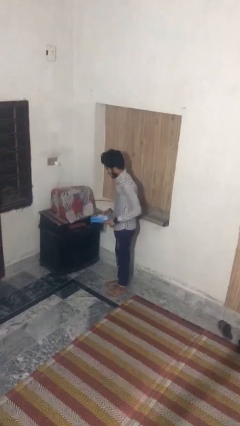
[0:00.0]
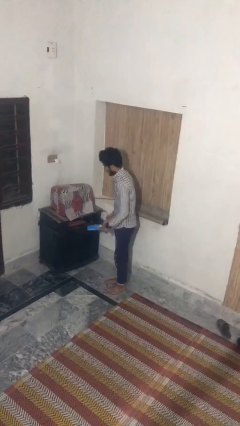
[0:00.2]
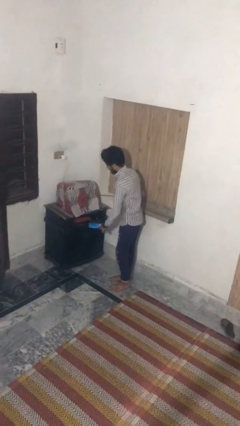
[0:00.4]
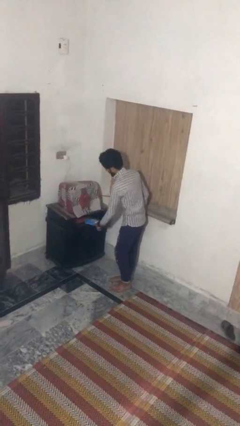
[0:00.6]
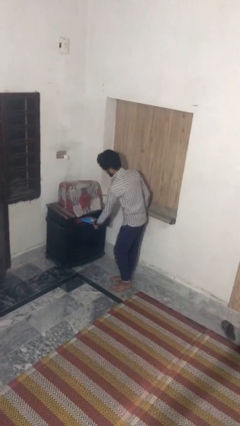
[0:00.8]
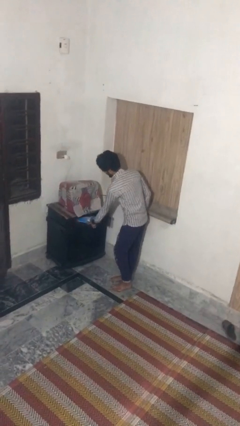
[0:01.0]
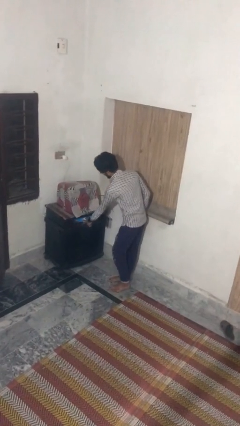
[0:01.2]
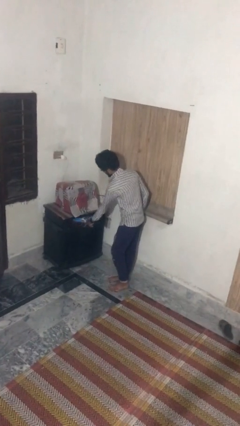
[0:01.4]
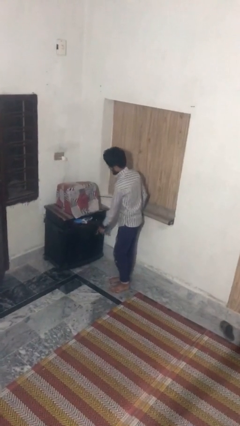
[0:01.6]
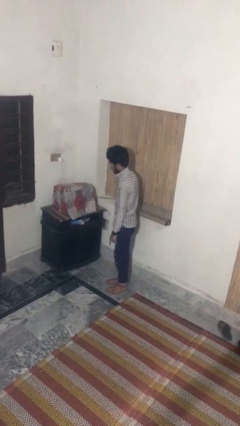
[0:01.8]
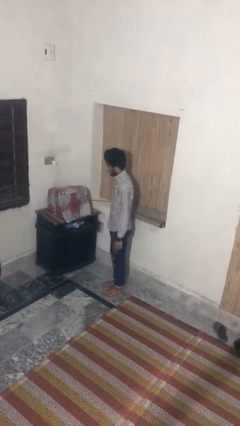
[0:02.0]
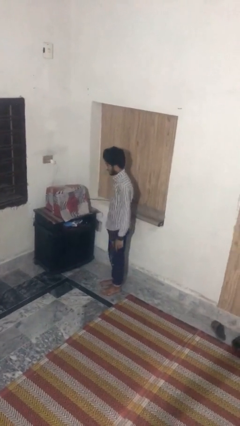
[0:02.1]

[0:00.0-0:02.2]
person puts down object into cabinet

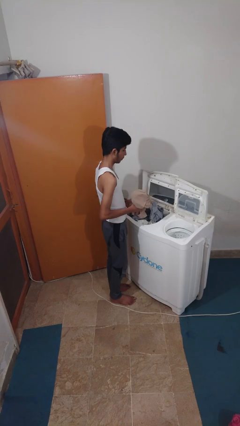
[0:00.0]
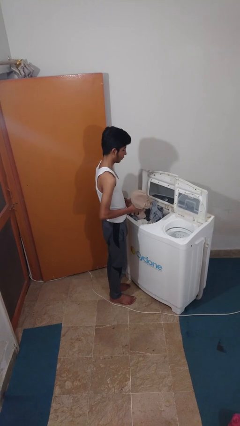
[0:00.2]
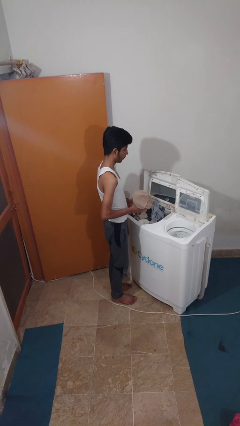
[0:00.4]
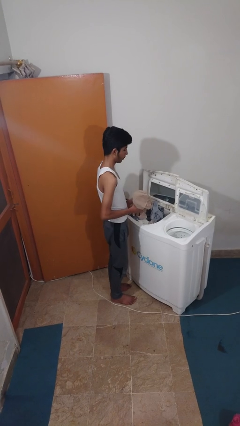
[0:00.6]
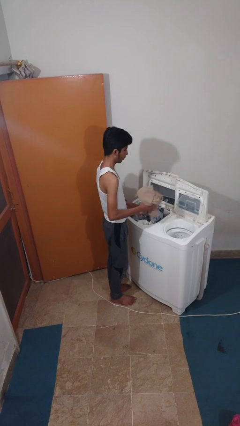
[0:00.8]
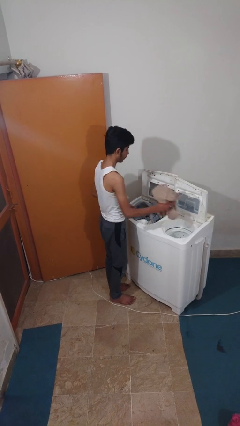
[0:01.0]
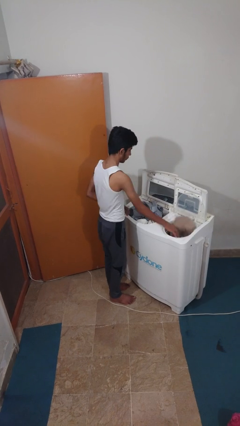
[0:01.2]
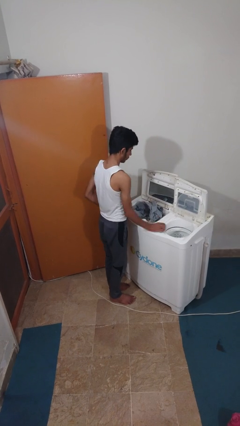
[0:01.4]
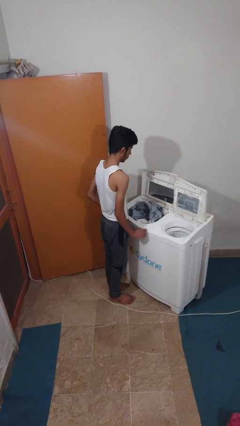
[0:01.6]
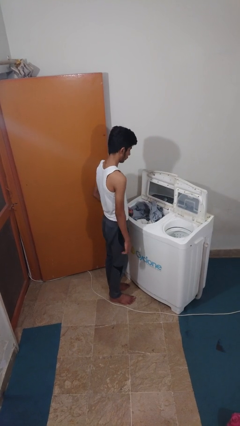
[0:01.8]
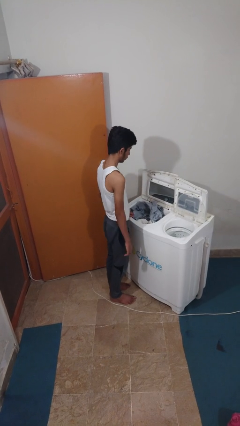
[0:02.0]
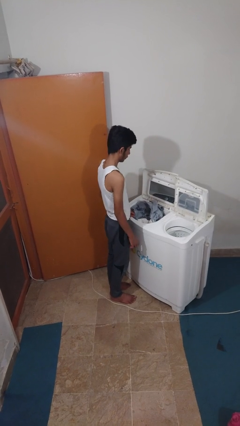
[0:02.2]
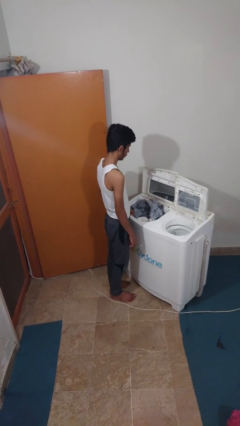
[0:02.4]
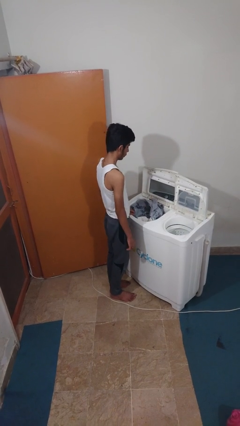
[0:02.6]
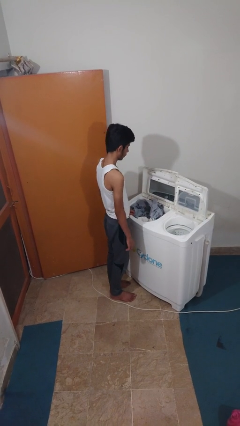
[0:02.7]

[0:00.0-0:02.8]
person loads dryer

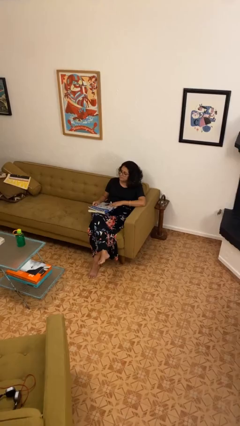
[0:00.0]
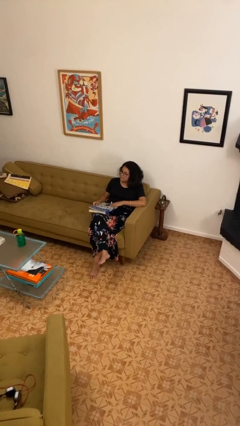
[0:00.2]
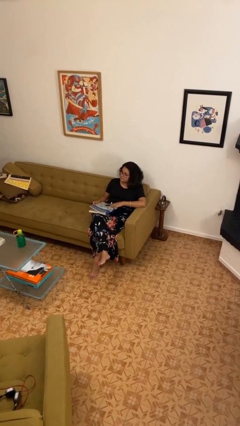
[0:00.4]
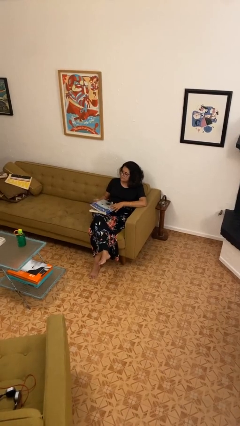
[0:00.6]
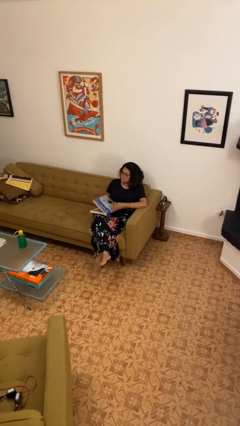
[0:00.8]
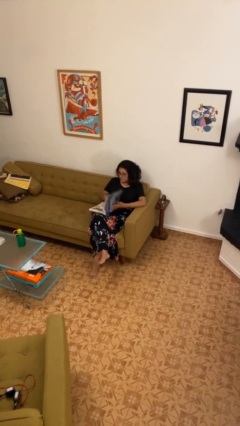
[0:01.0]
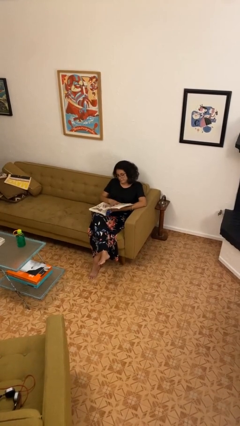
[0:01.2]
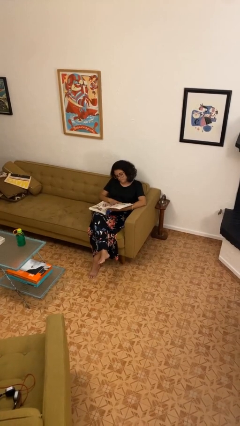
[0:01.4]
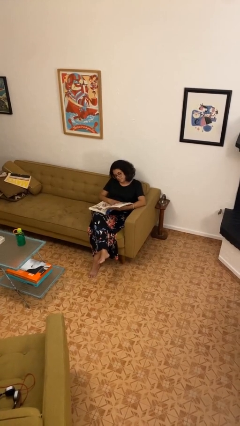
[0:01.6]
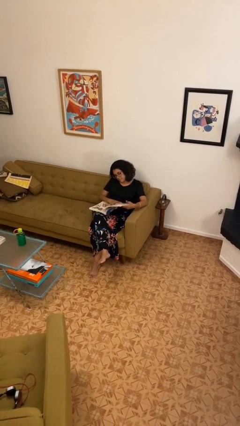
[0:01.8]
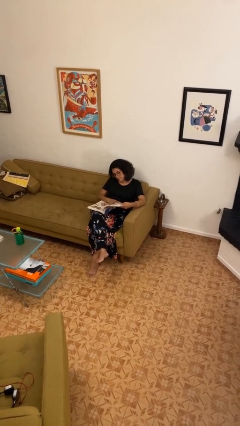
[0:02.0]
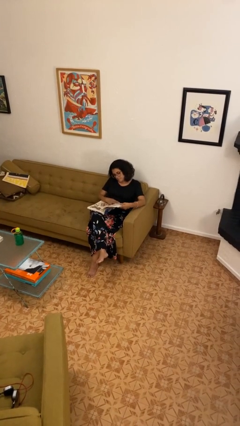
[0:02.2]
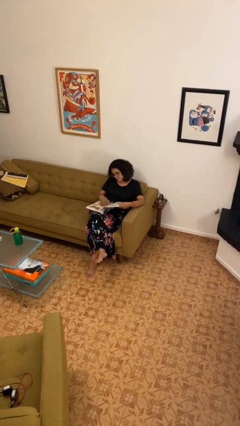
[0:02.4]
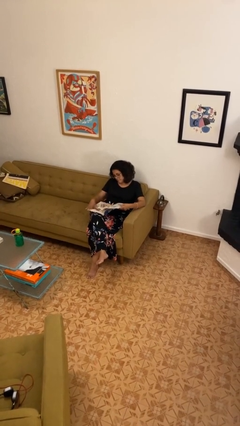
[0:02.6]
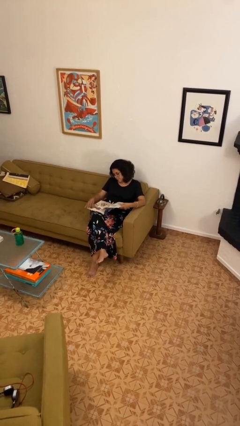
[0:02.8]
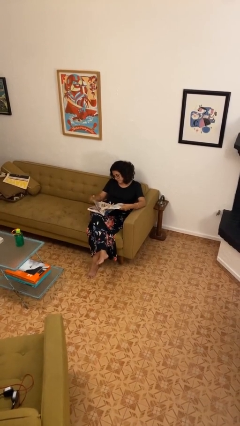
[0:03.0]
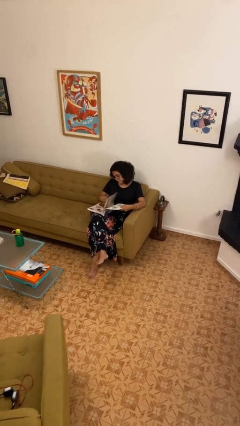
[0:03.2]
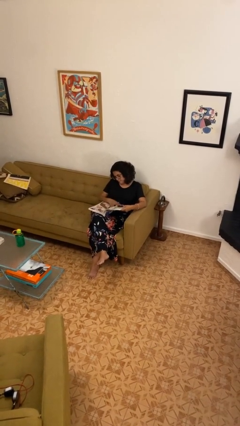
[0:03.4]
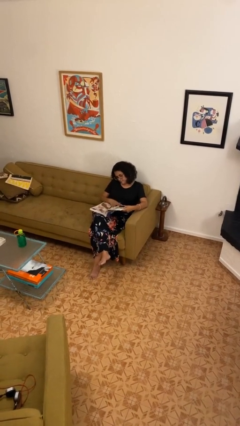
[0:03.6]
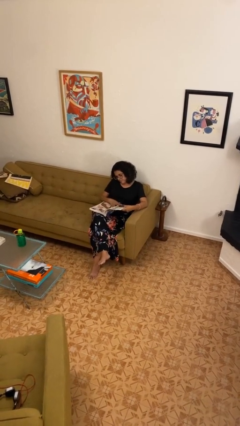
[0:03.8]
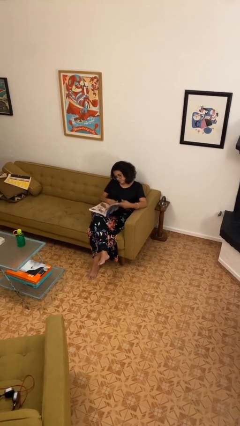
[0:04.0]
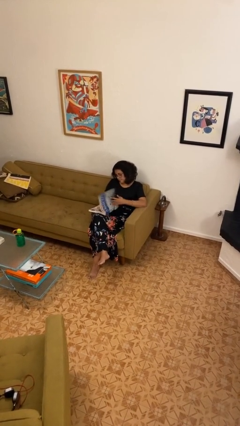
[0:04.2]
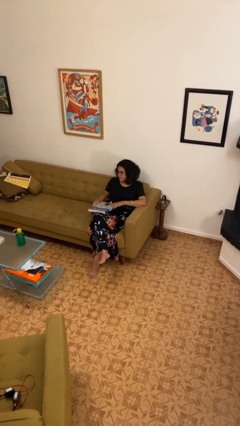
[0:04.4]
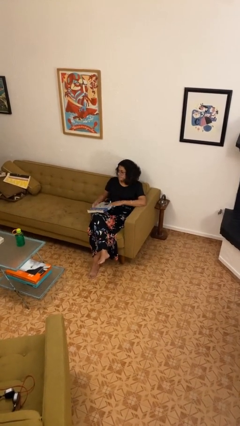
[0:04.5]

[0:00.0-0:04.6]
person reads book

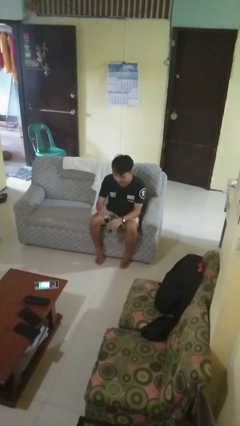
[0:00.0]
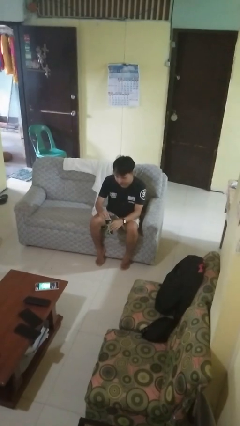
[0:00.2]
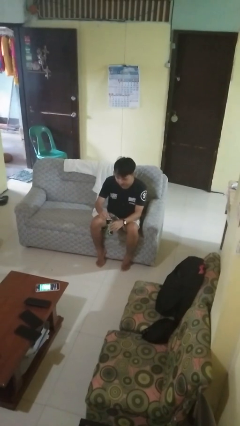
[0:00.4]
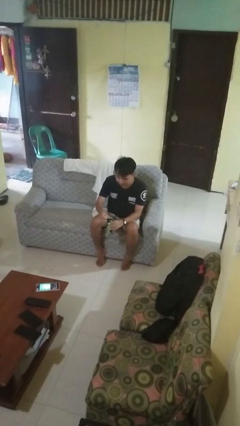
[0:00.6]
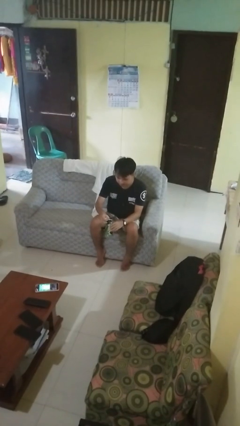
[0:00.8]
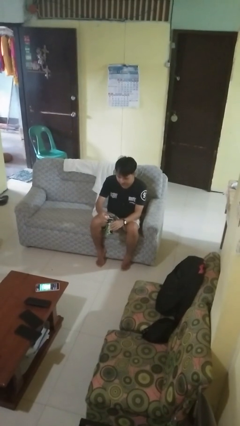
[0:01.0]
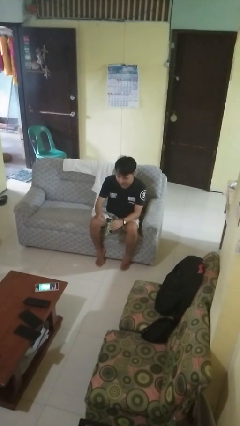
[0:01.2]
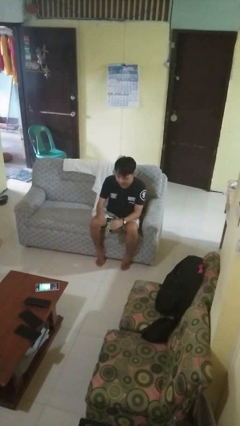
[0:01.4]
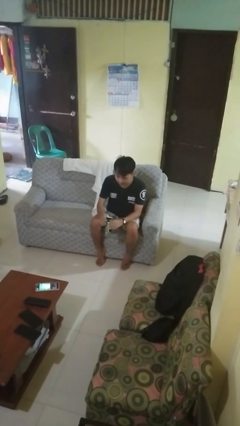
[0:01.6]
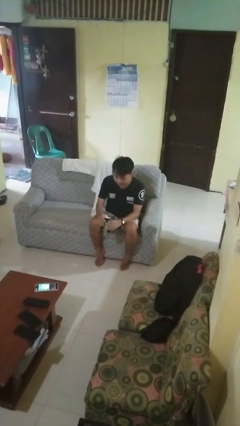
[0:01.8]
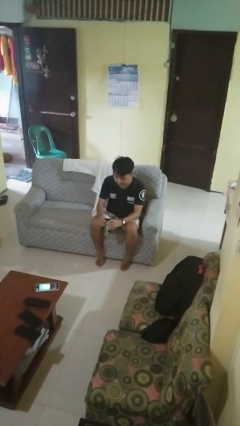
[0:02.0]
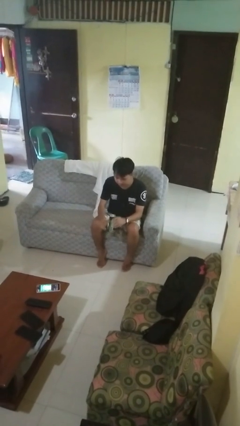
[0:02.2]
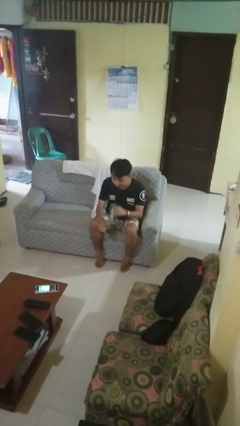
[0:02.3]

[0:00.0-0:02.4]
person opens beverage can

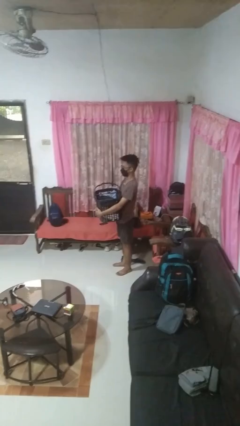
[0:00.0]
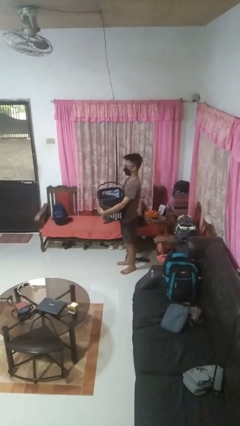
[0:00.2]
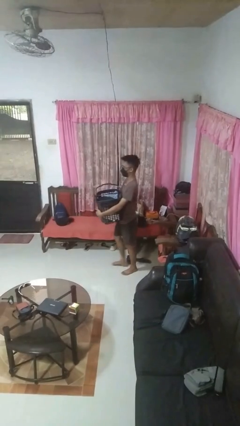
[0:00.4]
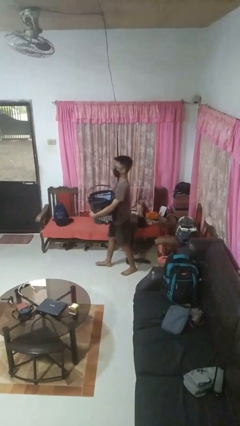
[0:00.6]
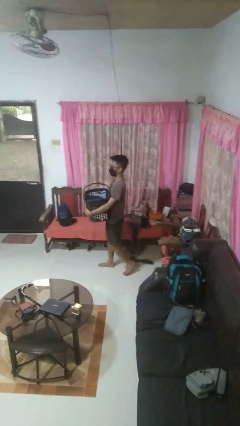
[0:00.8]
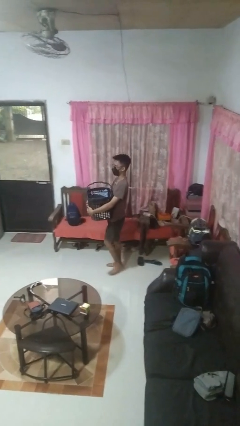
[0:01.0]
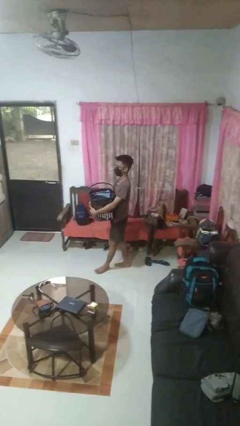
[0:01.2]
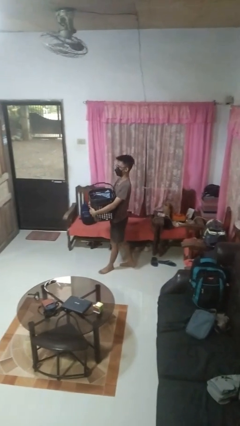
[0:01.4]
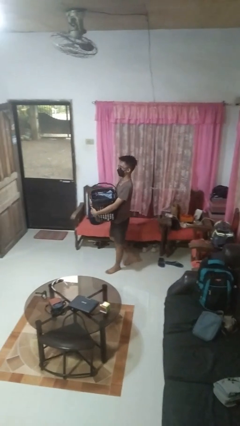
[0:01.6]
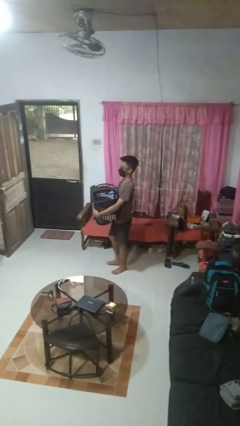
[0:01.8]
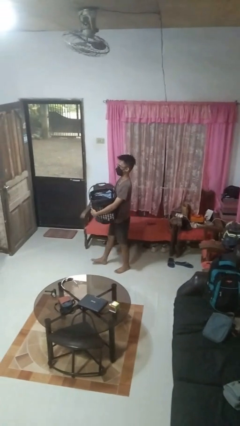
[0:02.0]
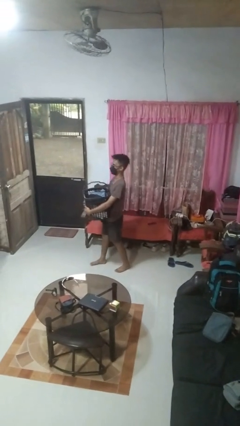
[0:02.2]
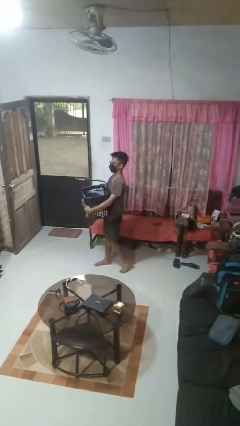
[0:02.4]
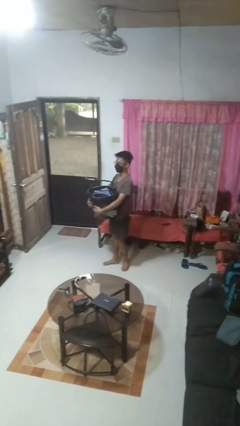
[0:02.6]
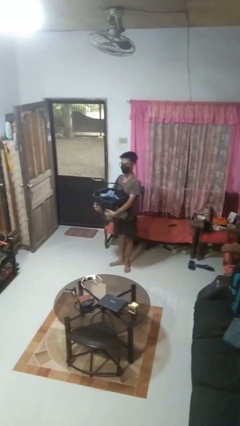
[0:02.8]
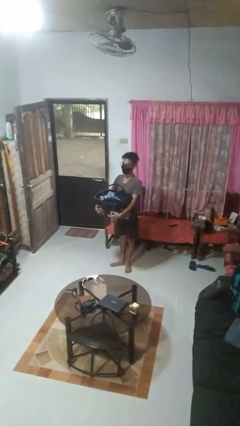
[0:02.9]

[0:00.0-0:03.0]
person carries laundry basket

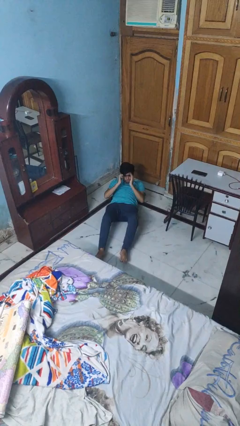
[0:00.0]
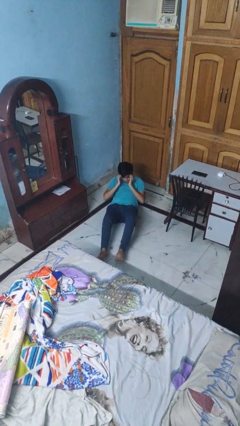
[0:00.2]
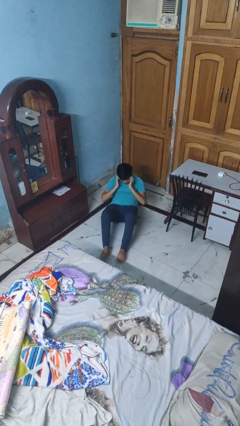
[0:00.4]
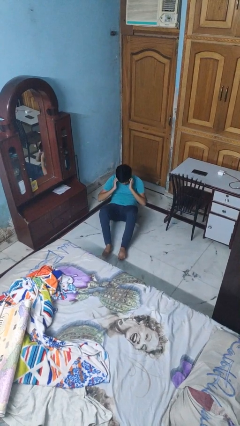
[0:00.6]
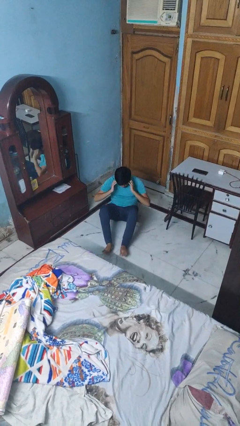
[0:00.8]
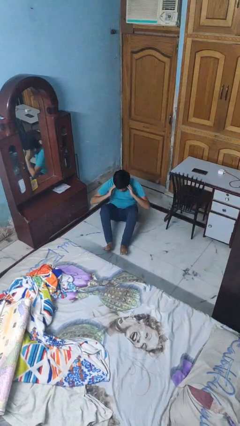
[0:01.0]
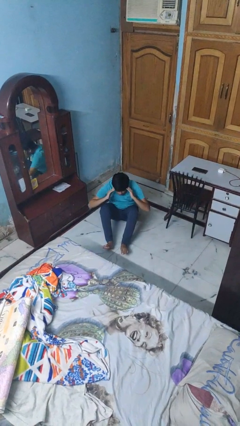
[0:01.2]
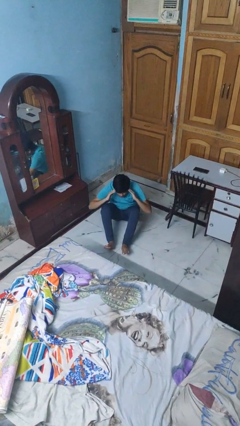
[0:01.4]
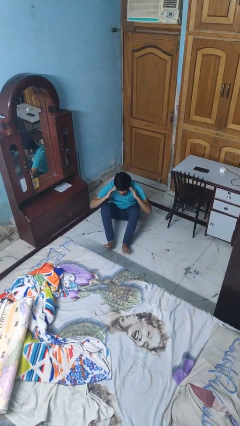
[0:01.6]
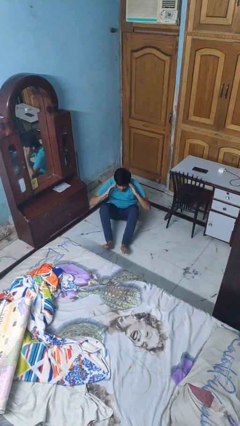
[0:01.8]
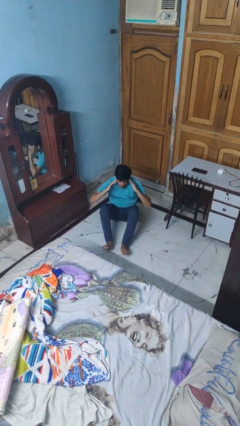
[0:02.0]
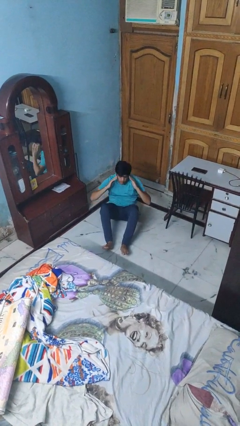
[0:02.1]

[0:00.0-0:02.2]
person exercises with situp

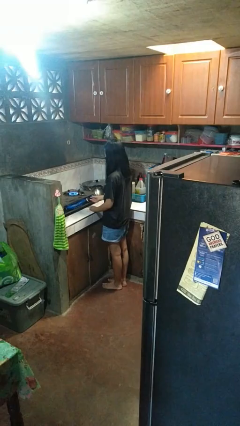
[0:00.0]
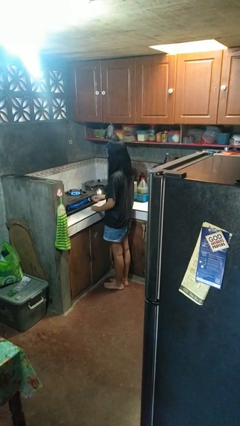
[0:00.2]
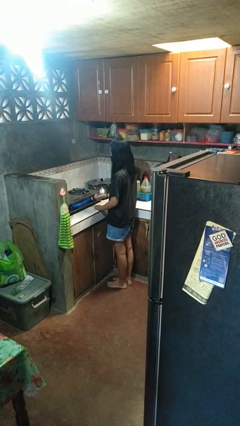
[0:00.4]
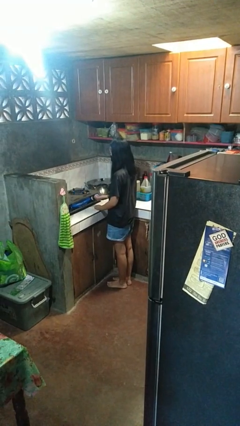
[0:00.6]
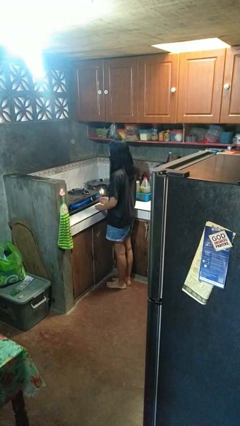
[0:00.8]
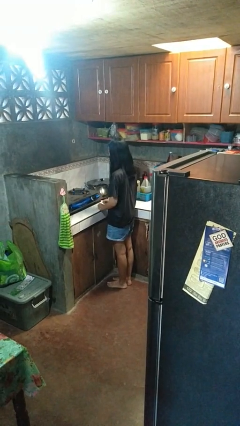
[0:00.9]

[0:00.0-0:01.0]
person turns off stovetop
